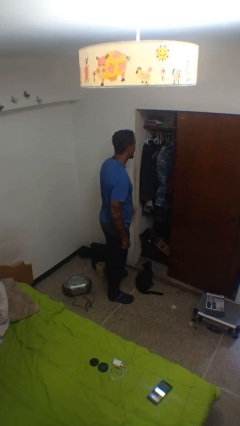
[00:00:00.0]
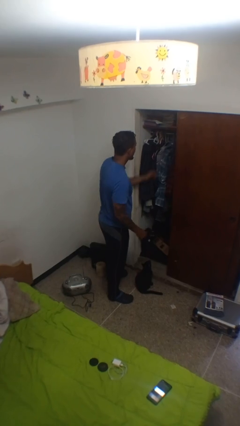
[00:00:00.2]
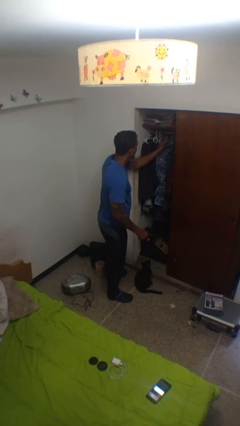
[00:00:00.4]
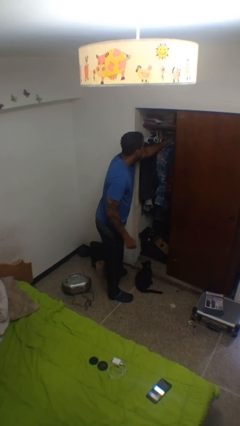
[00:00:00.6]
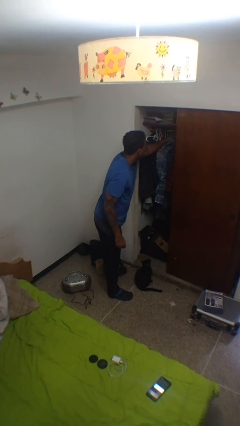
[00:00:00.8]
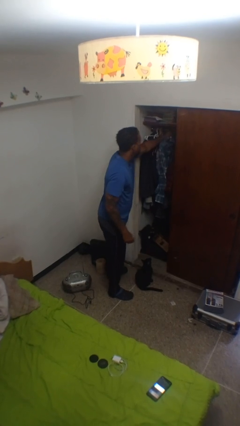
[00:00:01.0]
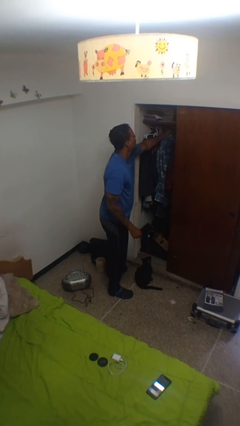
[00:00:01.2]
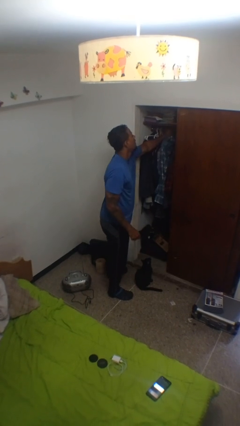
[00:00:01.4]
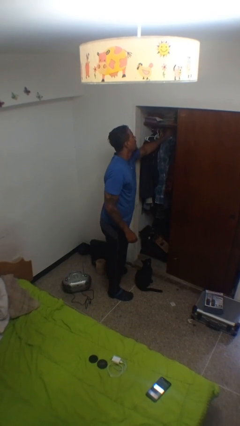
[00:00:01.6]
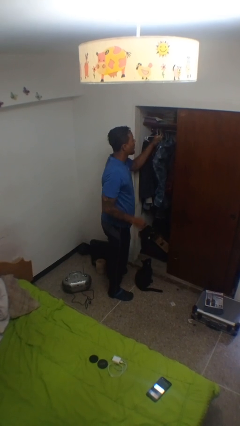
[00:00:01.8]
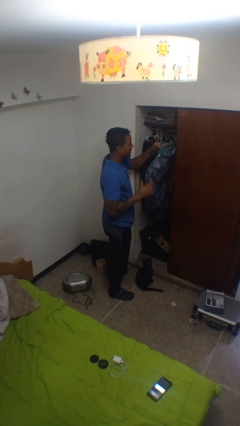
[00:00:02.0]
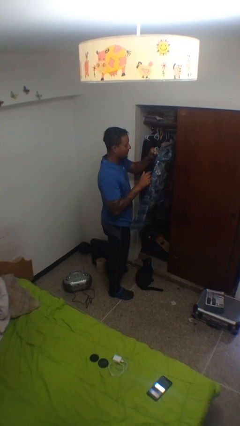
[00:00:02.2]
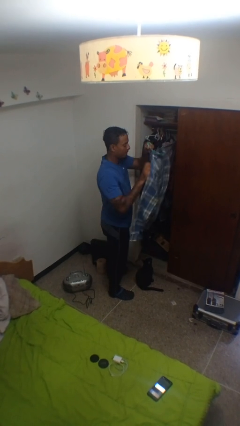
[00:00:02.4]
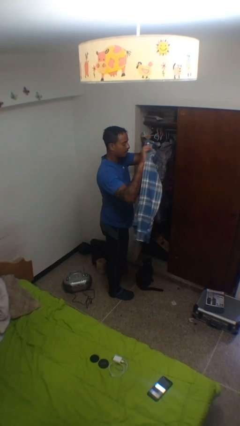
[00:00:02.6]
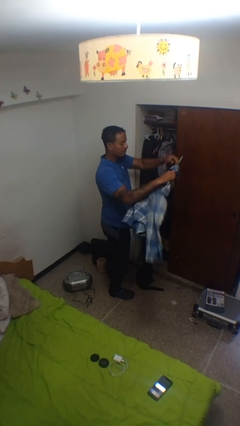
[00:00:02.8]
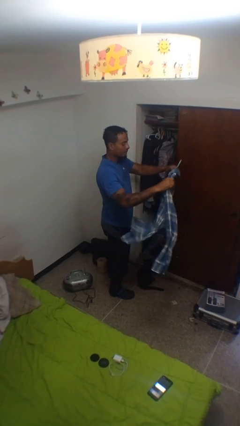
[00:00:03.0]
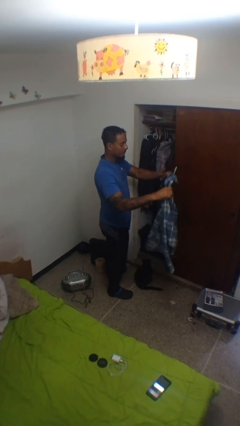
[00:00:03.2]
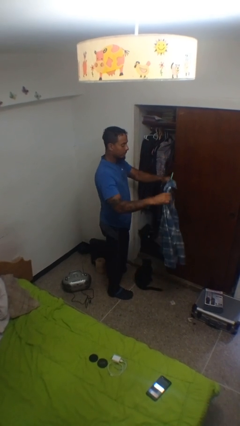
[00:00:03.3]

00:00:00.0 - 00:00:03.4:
person takes clothes from closet

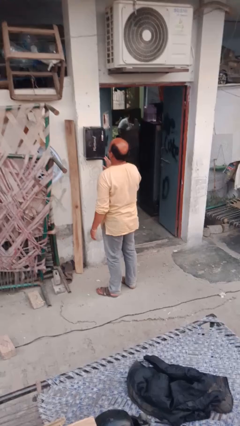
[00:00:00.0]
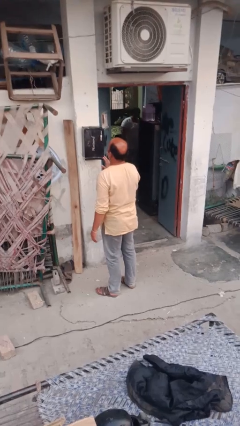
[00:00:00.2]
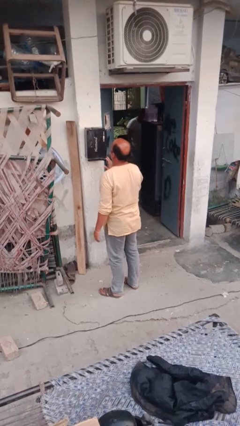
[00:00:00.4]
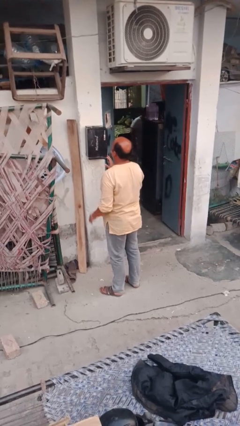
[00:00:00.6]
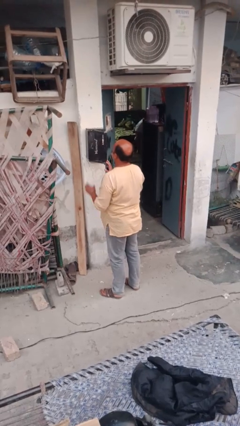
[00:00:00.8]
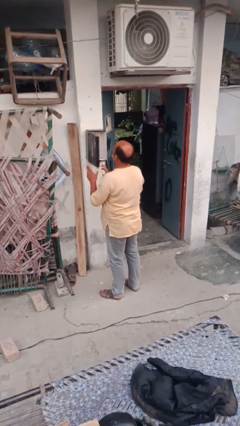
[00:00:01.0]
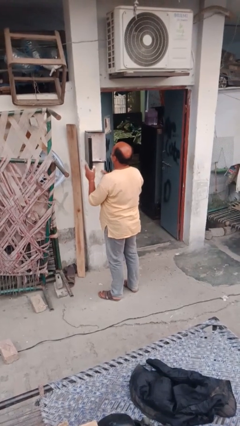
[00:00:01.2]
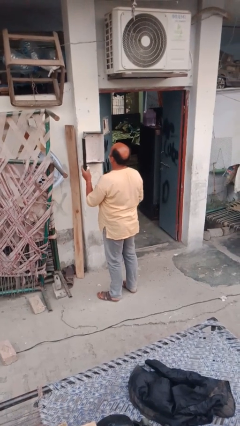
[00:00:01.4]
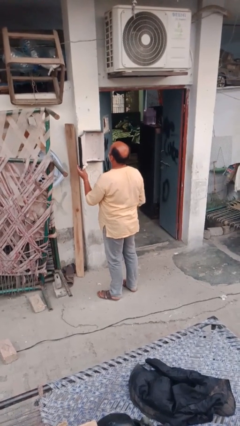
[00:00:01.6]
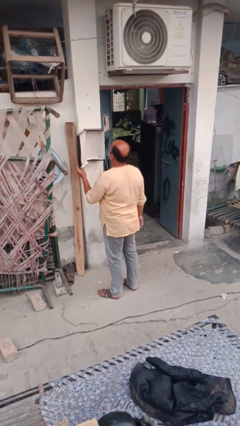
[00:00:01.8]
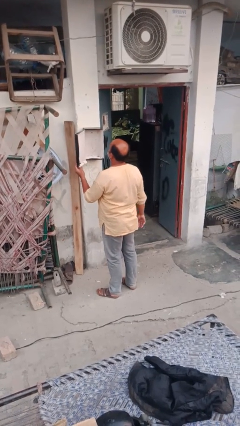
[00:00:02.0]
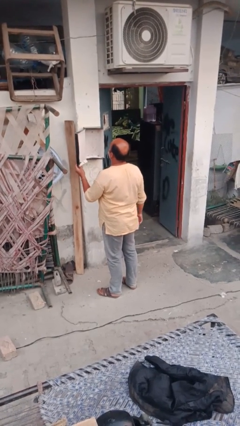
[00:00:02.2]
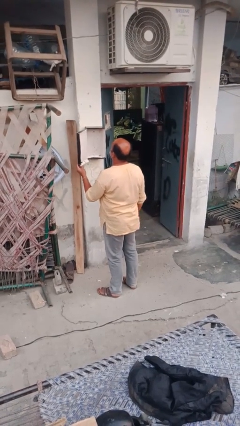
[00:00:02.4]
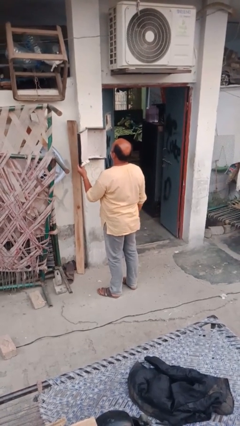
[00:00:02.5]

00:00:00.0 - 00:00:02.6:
person opens mailbox

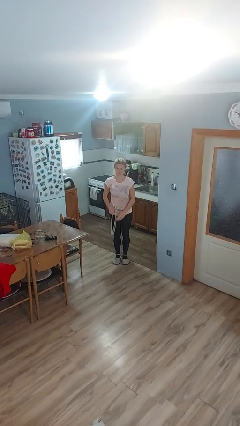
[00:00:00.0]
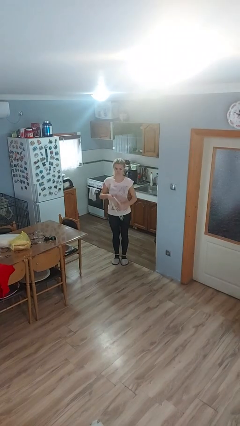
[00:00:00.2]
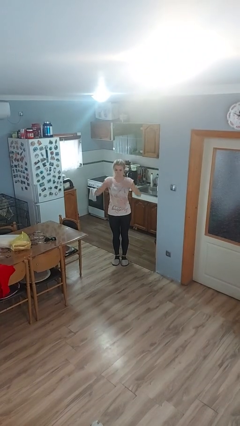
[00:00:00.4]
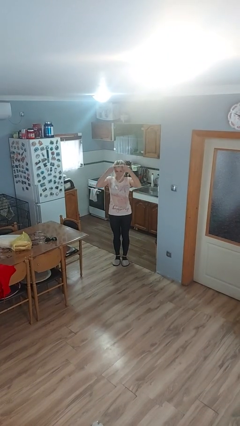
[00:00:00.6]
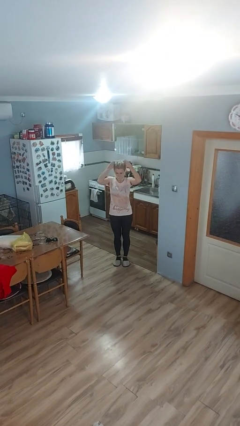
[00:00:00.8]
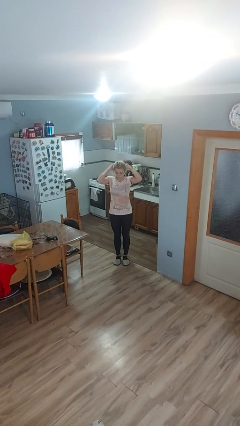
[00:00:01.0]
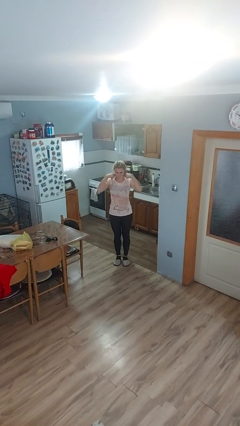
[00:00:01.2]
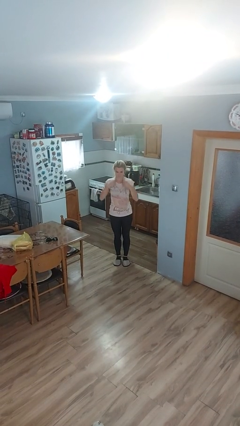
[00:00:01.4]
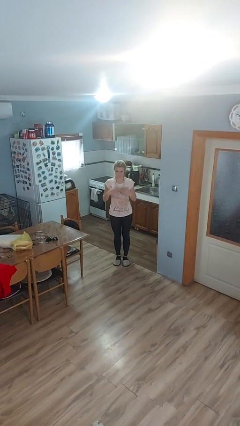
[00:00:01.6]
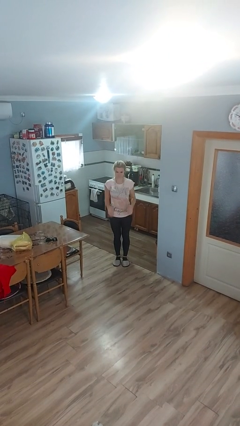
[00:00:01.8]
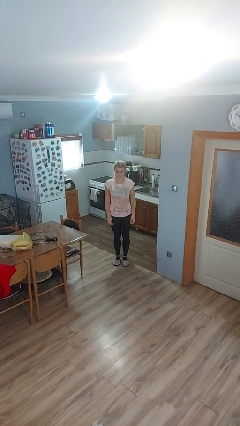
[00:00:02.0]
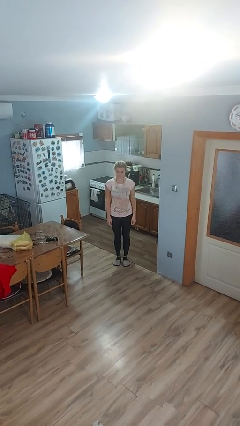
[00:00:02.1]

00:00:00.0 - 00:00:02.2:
person puts on necklace

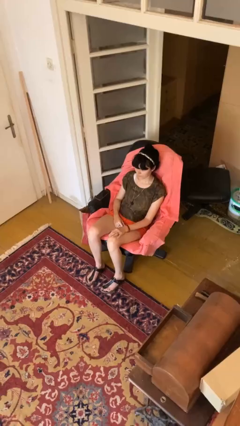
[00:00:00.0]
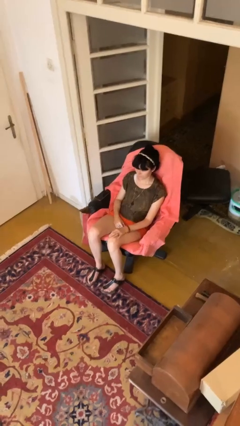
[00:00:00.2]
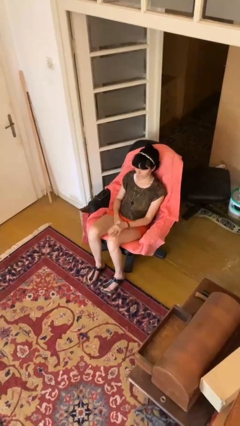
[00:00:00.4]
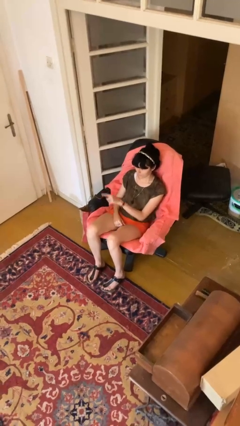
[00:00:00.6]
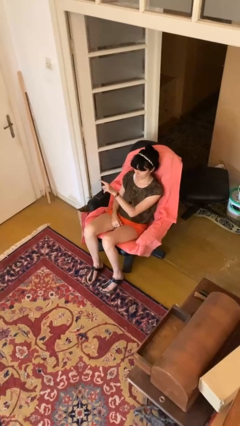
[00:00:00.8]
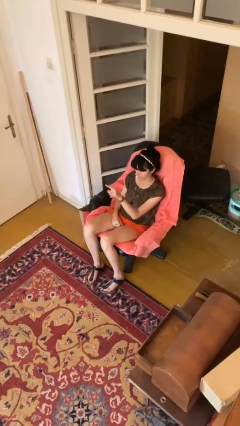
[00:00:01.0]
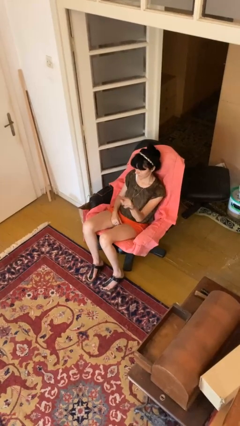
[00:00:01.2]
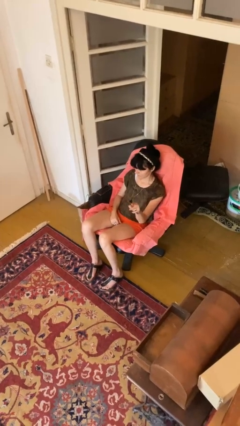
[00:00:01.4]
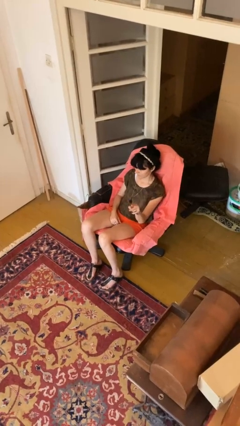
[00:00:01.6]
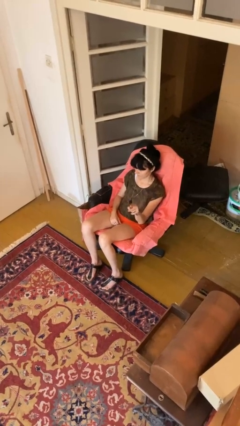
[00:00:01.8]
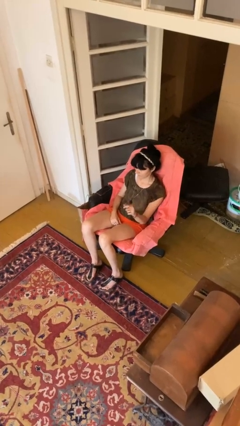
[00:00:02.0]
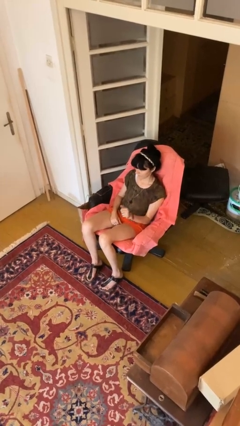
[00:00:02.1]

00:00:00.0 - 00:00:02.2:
person gestures swipe left

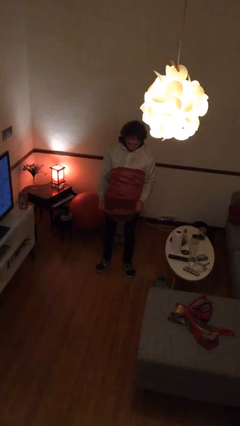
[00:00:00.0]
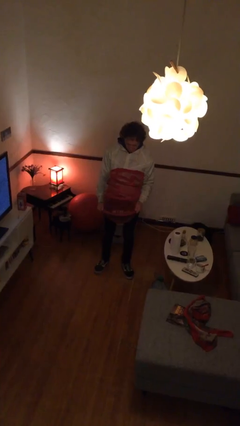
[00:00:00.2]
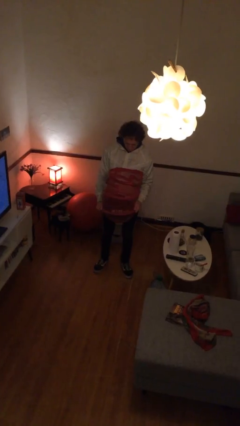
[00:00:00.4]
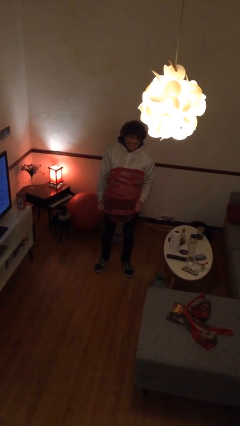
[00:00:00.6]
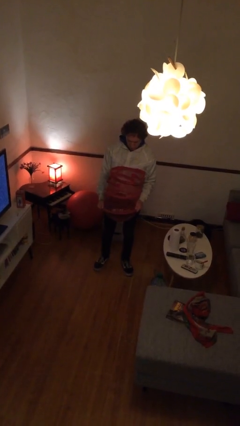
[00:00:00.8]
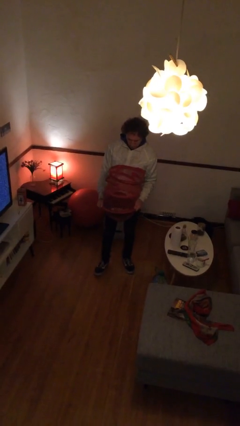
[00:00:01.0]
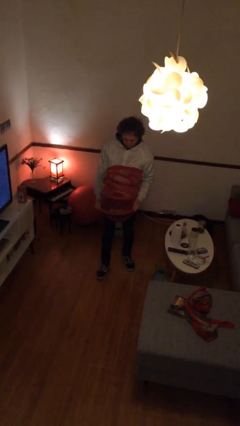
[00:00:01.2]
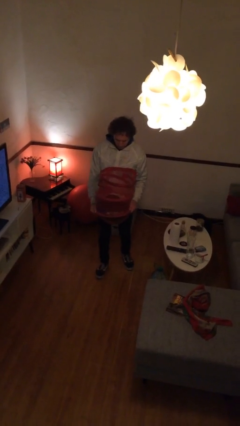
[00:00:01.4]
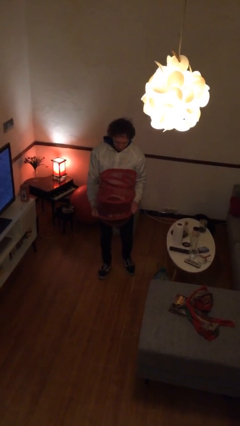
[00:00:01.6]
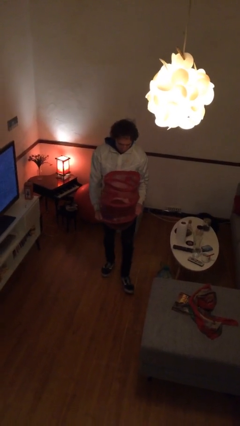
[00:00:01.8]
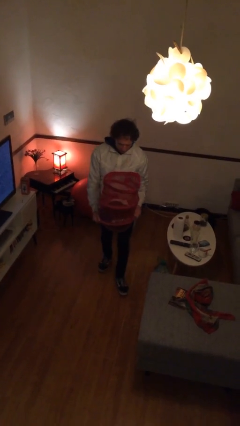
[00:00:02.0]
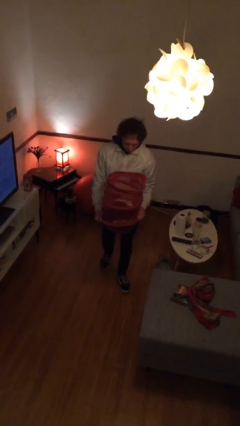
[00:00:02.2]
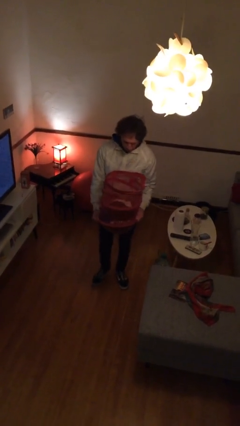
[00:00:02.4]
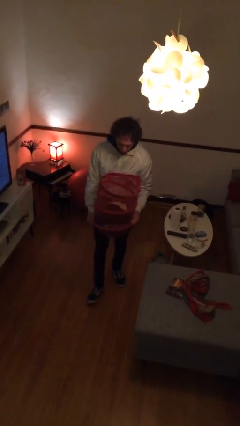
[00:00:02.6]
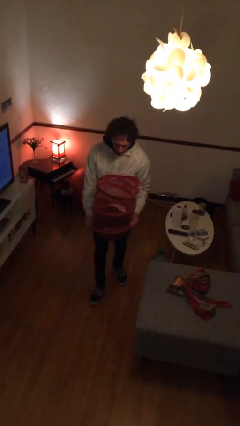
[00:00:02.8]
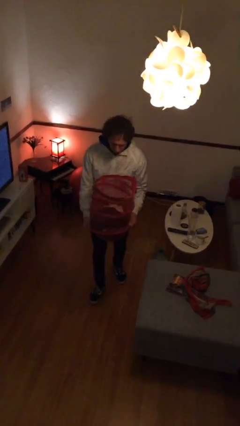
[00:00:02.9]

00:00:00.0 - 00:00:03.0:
person carries laundry basket

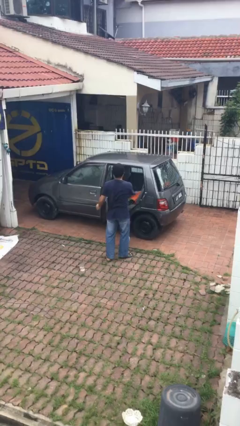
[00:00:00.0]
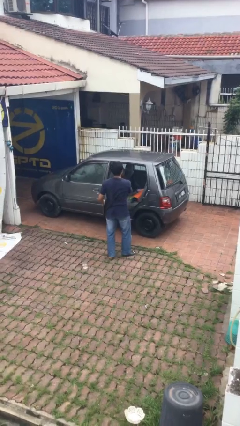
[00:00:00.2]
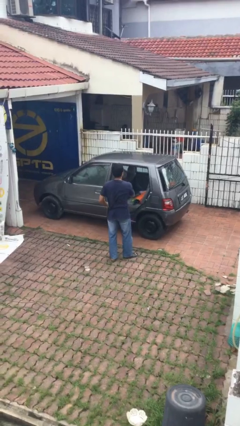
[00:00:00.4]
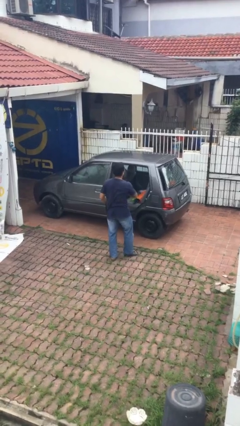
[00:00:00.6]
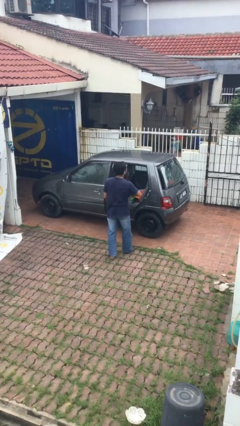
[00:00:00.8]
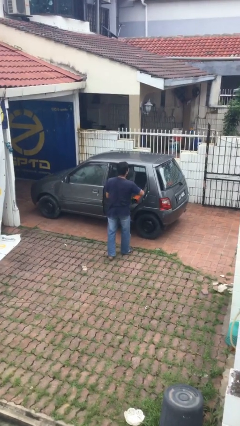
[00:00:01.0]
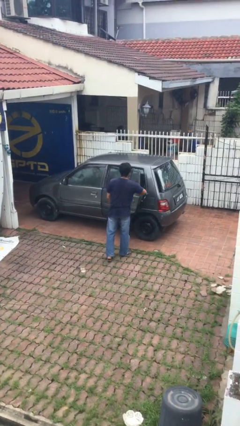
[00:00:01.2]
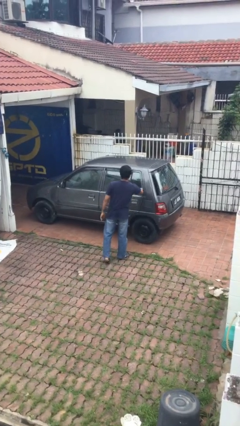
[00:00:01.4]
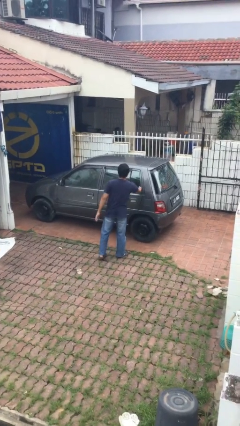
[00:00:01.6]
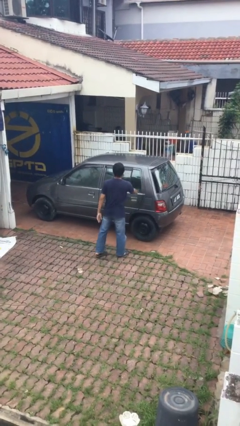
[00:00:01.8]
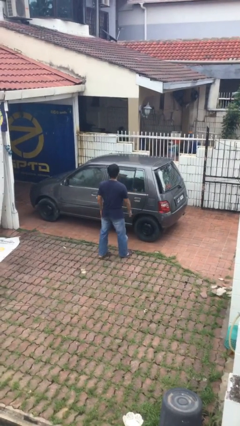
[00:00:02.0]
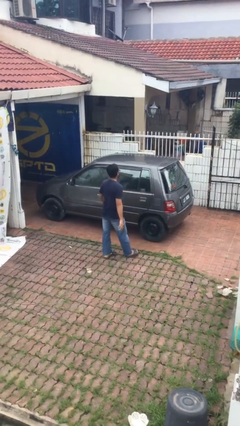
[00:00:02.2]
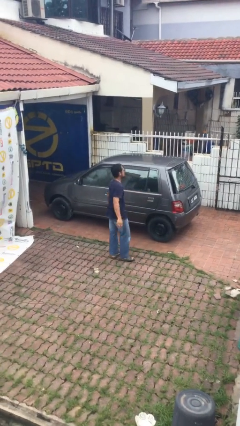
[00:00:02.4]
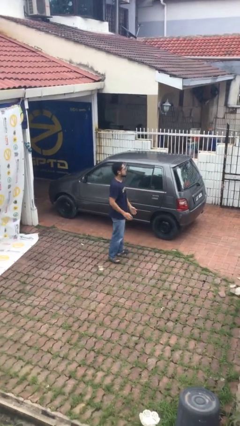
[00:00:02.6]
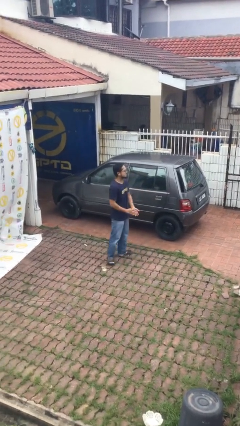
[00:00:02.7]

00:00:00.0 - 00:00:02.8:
person closes car door

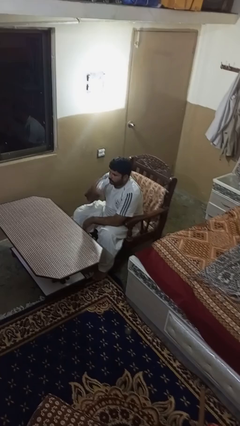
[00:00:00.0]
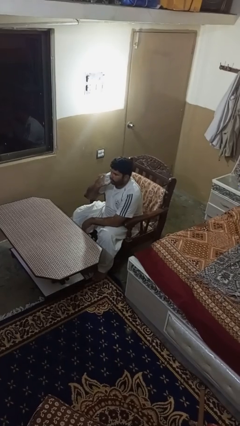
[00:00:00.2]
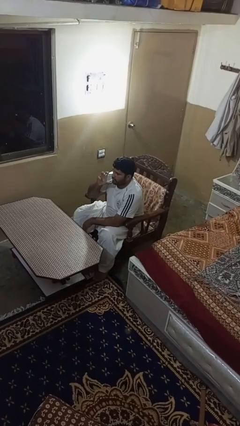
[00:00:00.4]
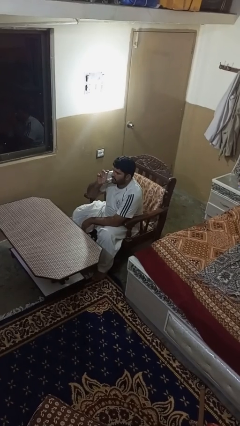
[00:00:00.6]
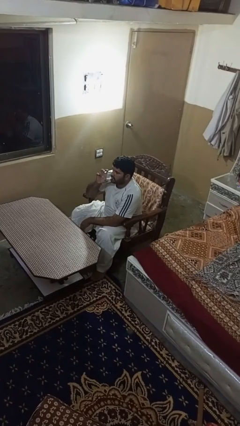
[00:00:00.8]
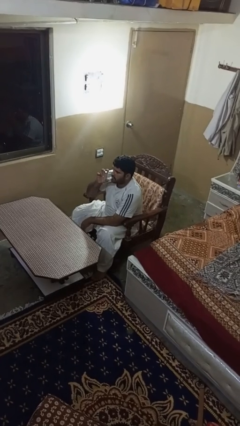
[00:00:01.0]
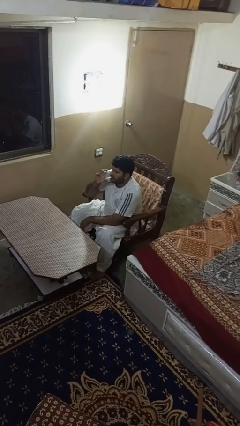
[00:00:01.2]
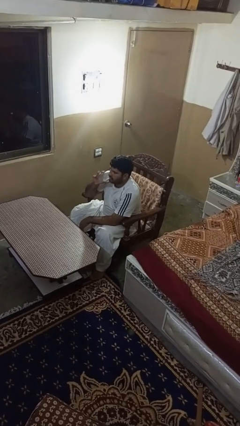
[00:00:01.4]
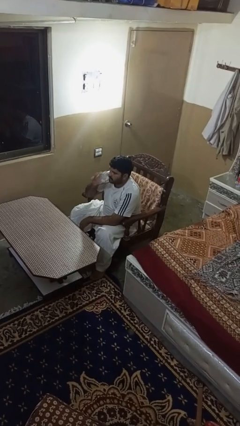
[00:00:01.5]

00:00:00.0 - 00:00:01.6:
person drinks from shotglass
